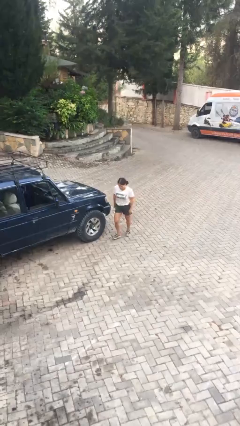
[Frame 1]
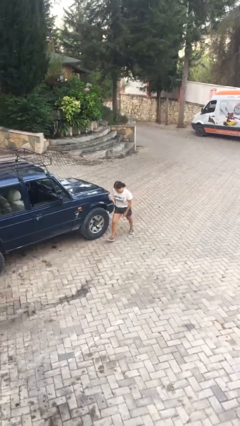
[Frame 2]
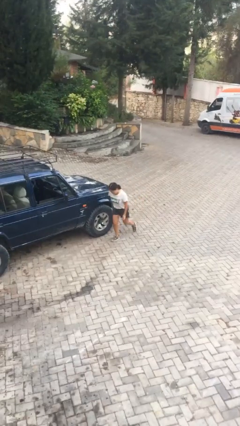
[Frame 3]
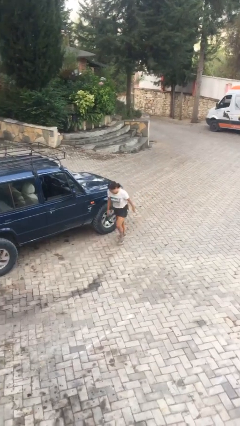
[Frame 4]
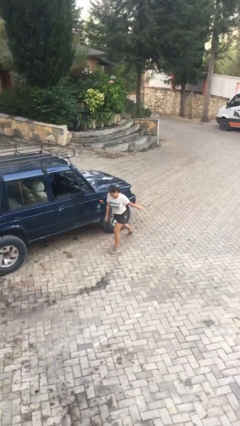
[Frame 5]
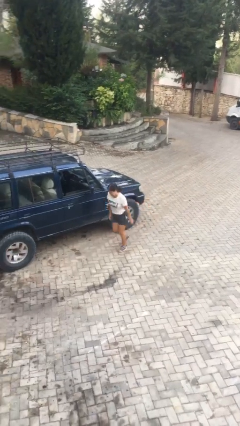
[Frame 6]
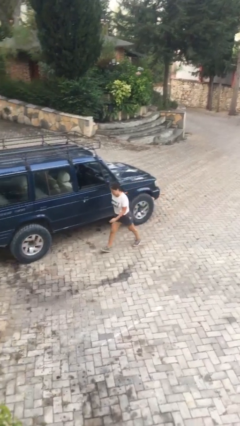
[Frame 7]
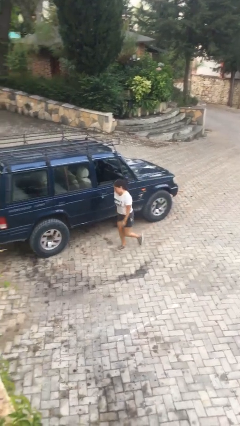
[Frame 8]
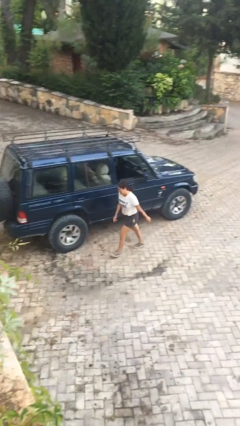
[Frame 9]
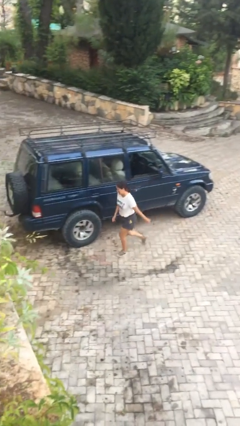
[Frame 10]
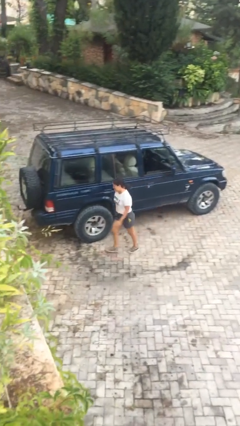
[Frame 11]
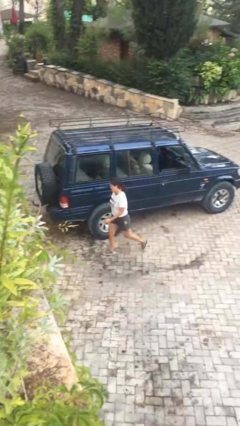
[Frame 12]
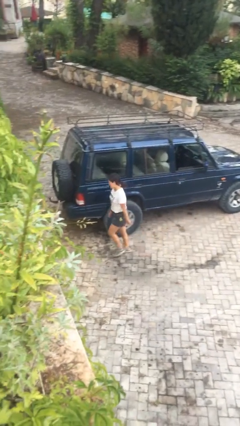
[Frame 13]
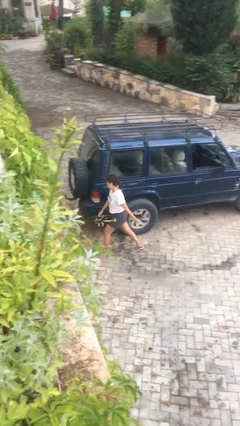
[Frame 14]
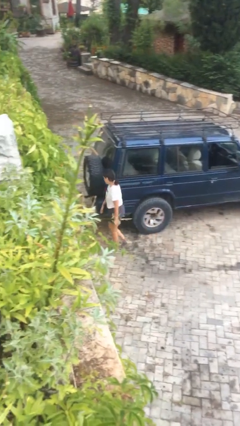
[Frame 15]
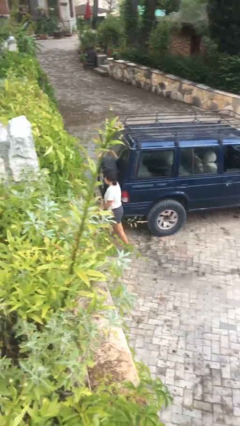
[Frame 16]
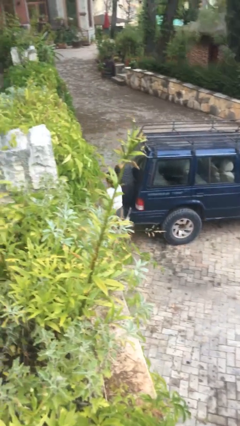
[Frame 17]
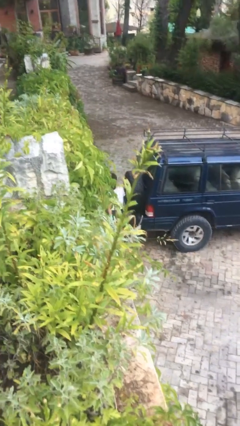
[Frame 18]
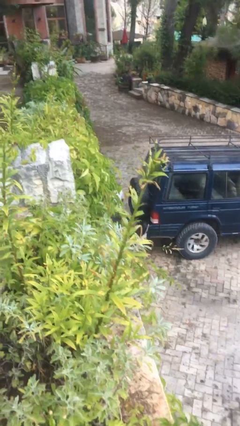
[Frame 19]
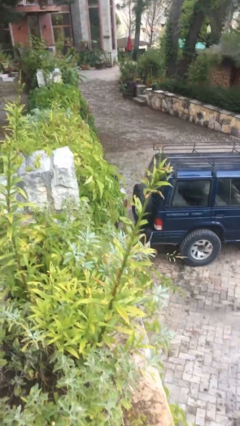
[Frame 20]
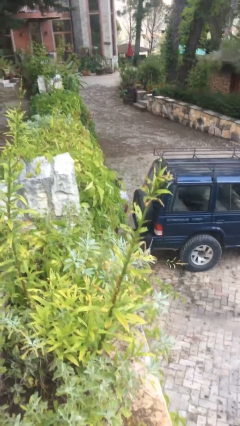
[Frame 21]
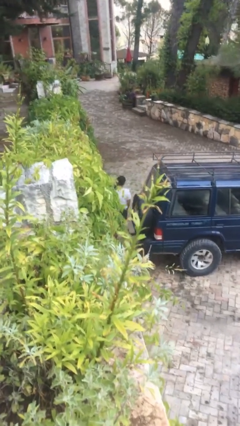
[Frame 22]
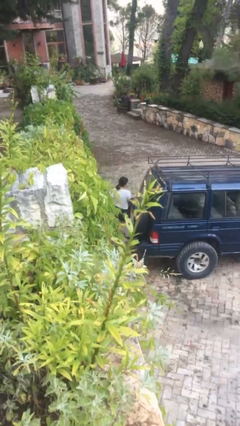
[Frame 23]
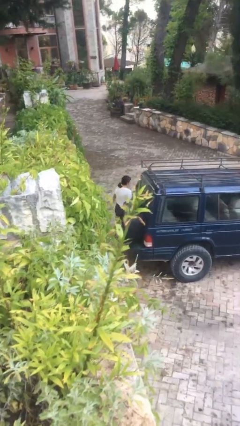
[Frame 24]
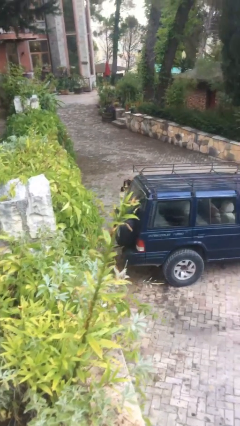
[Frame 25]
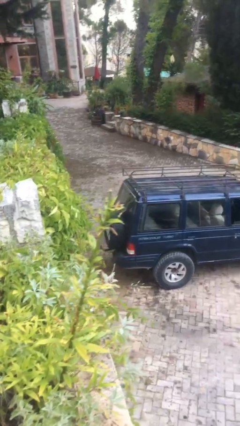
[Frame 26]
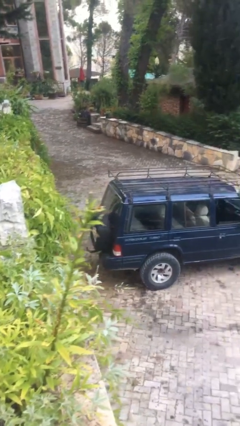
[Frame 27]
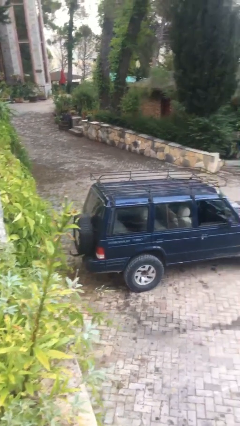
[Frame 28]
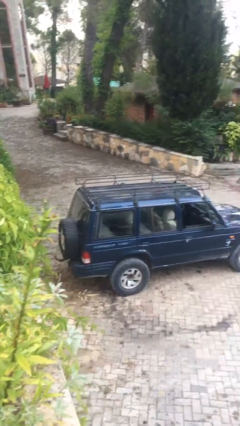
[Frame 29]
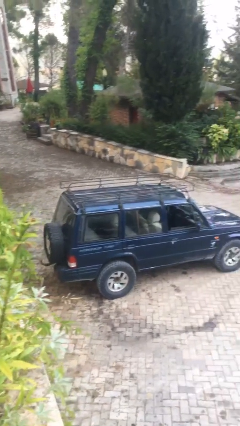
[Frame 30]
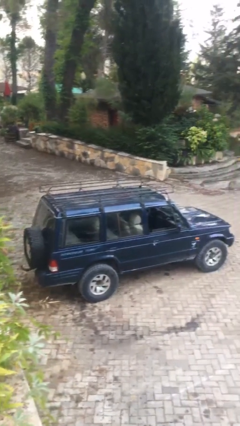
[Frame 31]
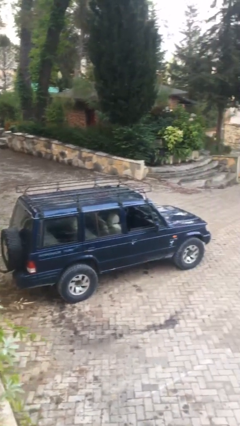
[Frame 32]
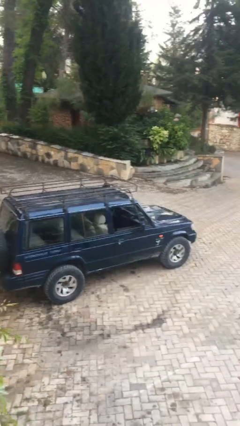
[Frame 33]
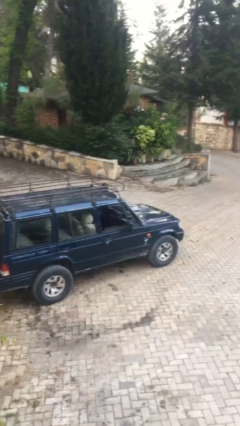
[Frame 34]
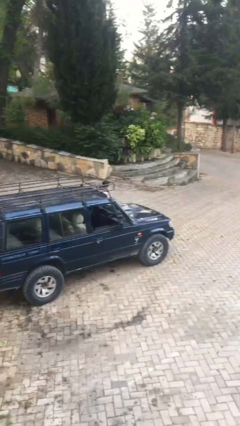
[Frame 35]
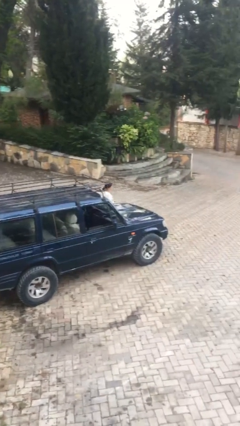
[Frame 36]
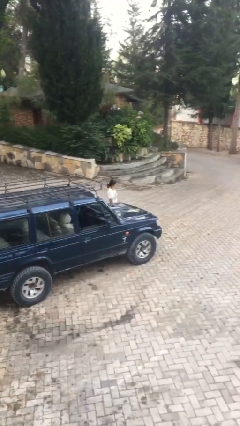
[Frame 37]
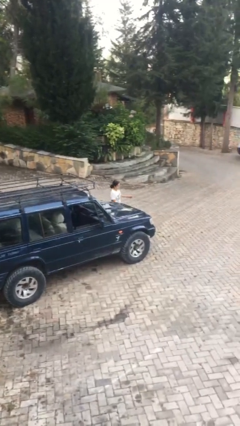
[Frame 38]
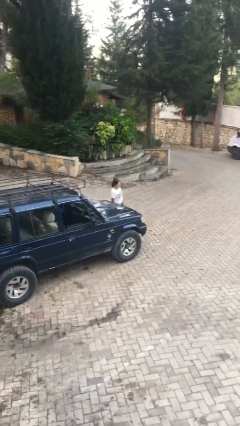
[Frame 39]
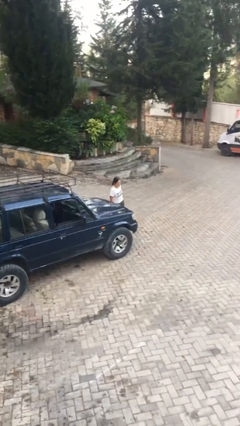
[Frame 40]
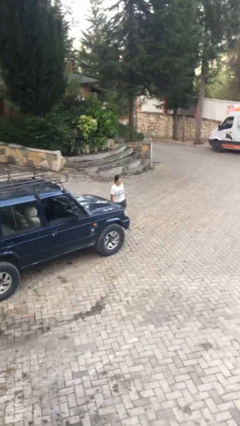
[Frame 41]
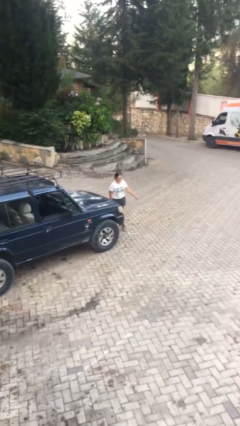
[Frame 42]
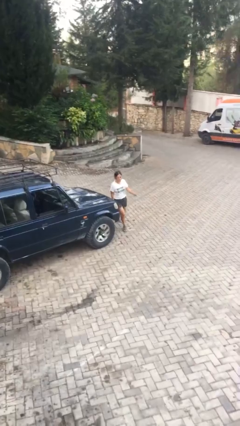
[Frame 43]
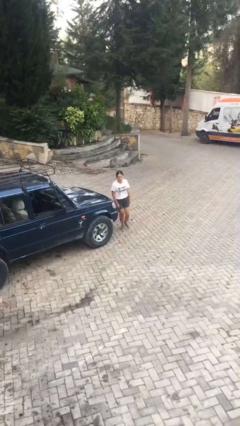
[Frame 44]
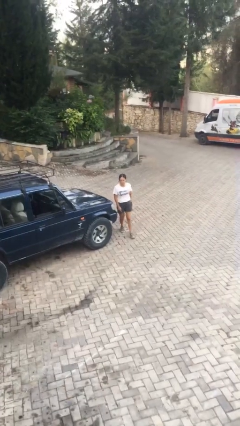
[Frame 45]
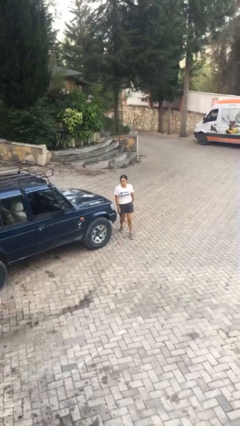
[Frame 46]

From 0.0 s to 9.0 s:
person walks around car

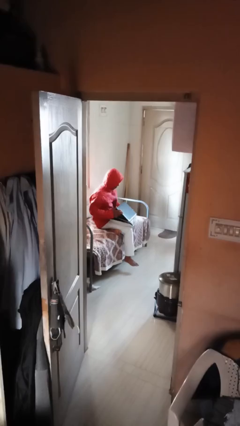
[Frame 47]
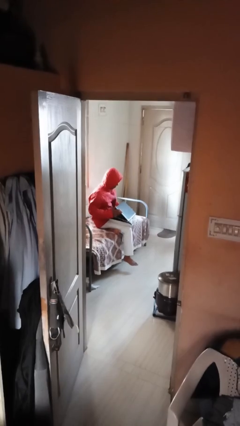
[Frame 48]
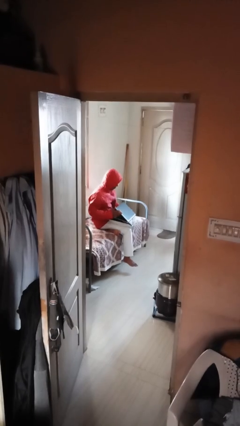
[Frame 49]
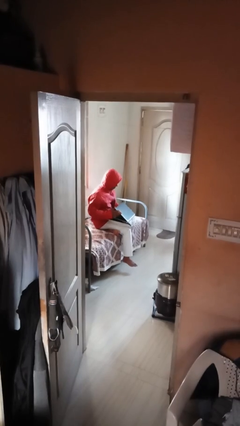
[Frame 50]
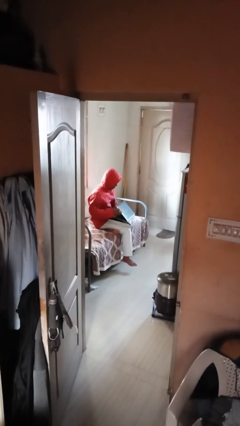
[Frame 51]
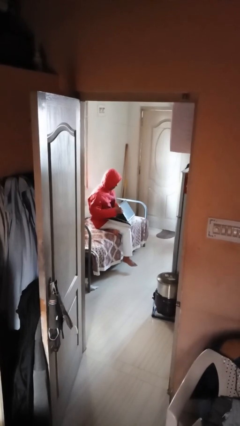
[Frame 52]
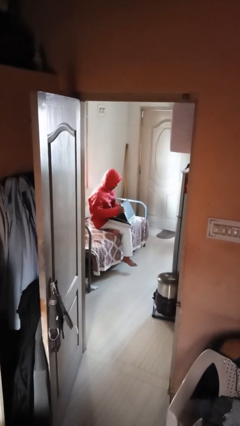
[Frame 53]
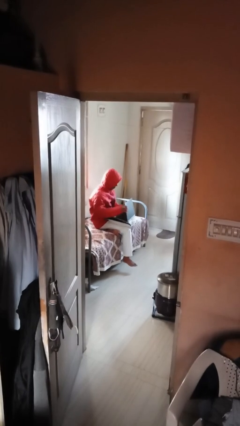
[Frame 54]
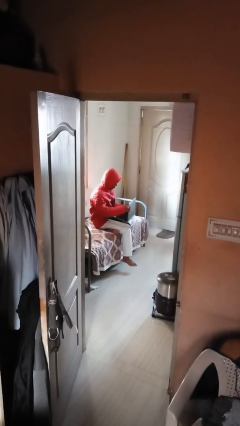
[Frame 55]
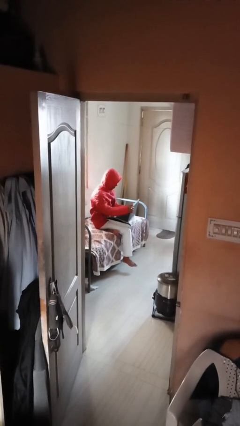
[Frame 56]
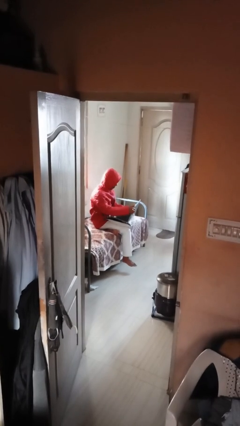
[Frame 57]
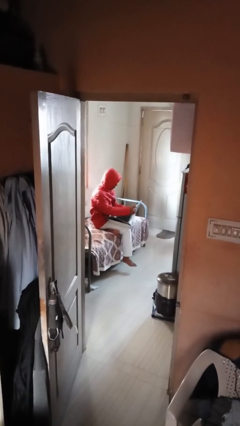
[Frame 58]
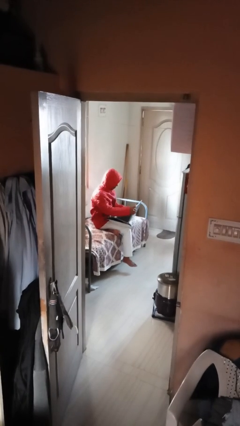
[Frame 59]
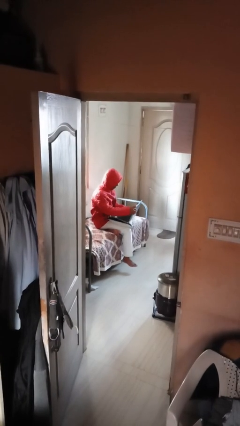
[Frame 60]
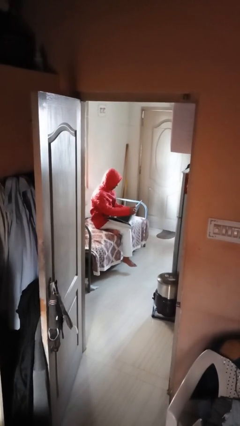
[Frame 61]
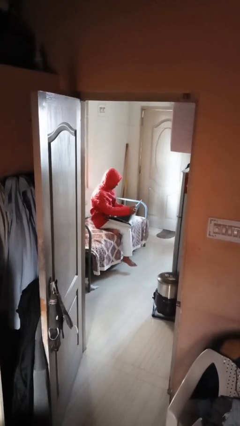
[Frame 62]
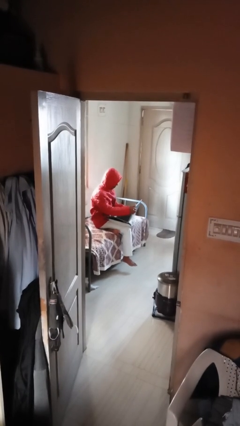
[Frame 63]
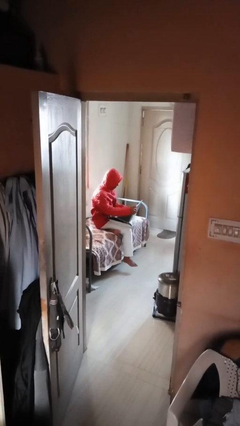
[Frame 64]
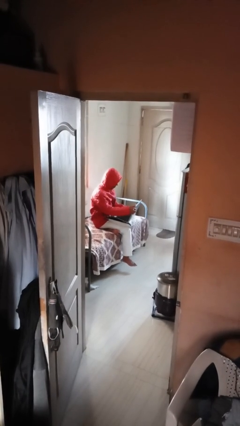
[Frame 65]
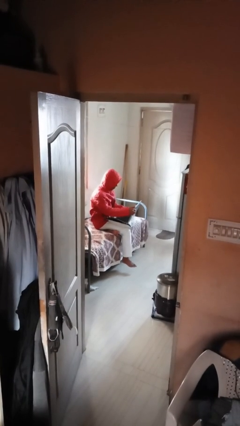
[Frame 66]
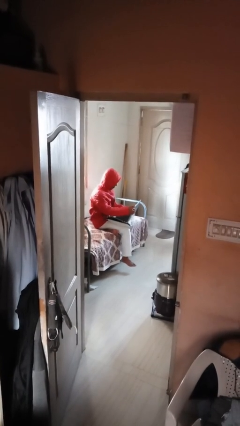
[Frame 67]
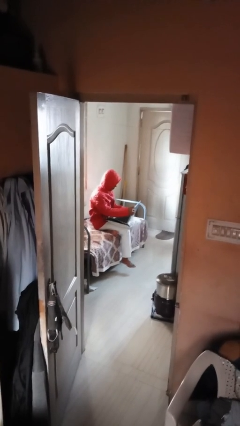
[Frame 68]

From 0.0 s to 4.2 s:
person interacts with laptop

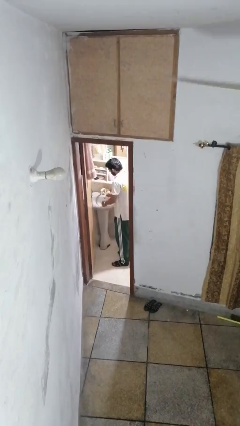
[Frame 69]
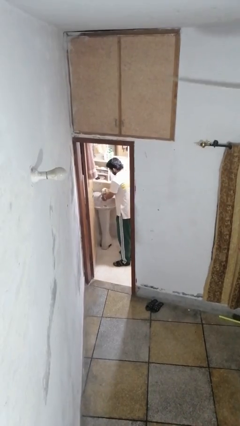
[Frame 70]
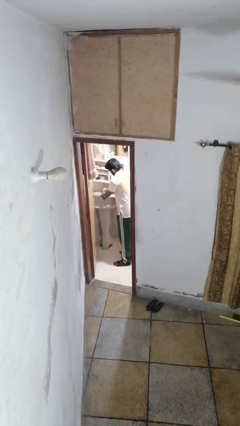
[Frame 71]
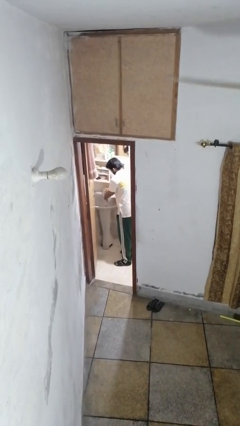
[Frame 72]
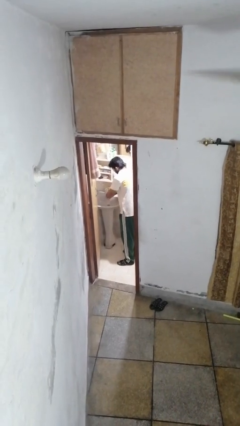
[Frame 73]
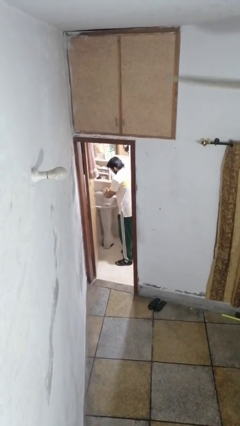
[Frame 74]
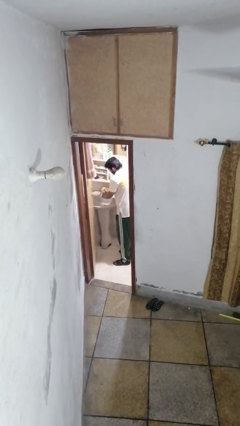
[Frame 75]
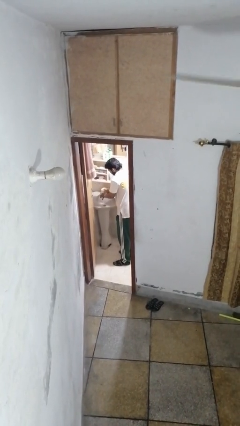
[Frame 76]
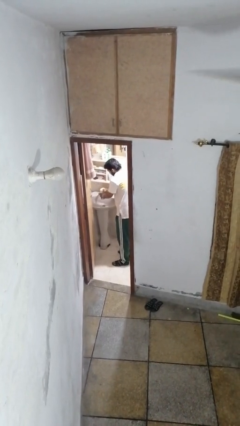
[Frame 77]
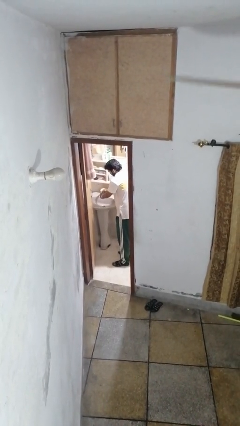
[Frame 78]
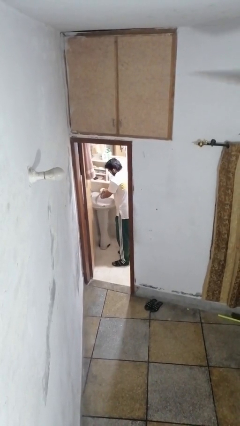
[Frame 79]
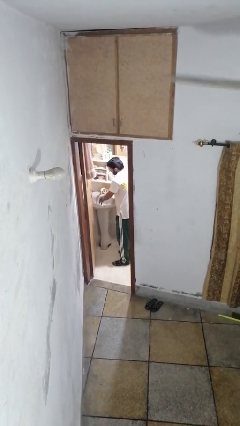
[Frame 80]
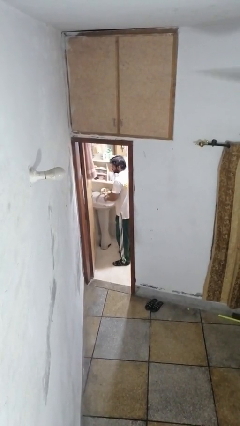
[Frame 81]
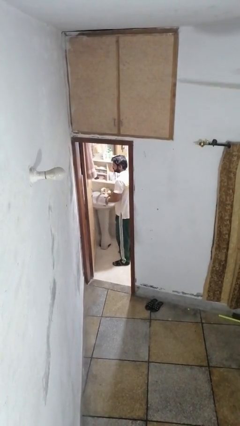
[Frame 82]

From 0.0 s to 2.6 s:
person washes hands

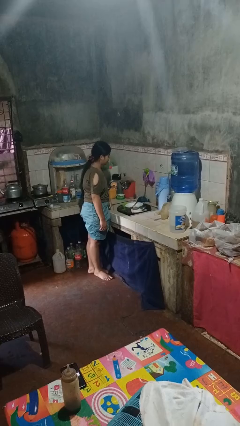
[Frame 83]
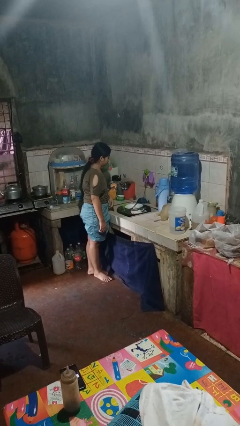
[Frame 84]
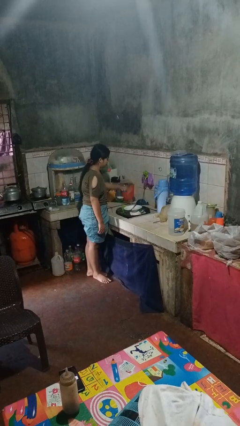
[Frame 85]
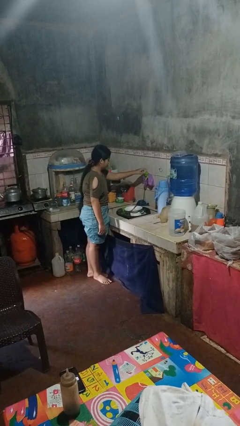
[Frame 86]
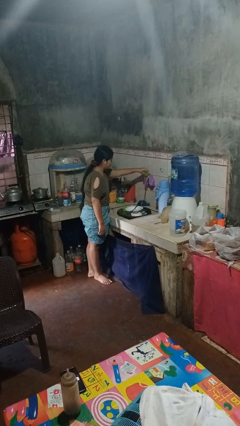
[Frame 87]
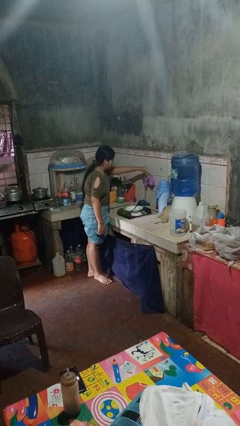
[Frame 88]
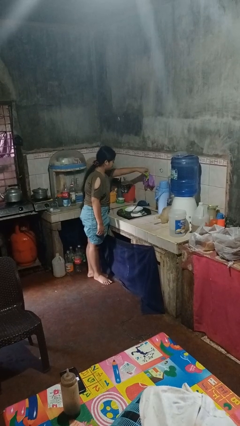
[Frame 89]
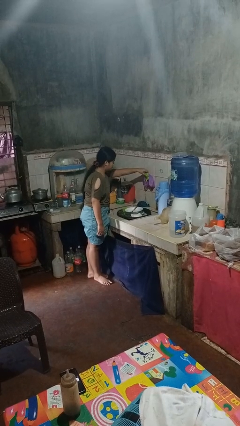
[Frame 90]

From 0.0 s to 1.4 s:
person turns off faucet

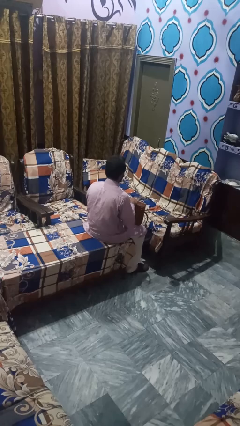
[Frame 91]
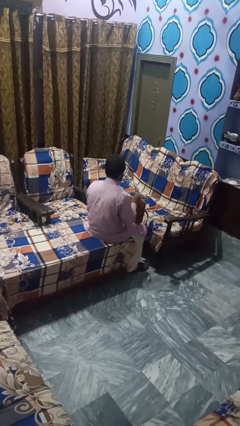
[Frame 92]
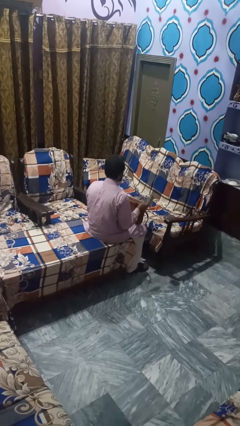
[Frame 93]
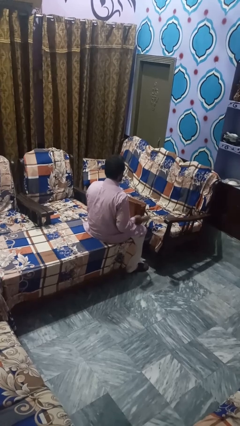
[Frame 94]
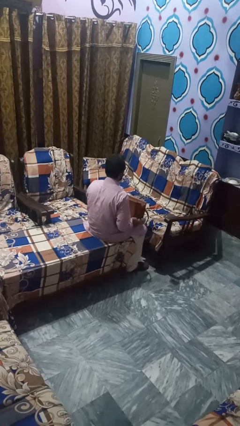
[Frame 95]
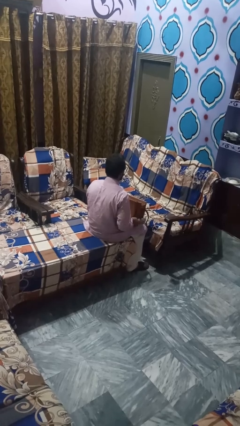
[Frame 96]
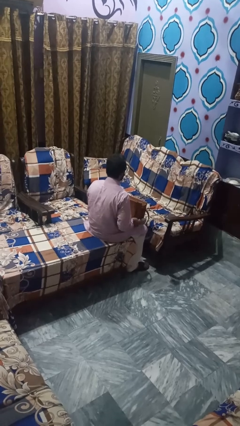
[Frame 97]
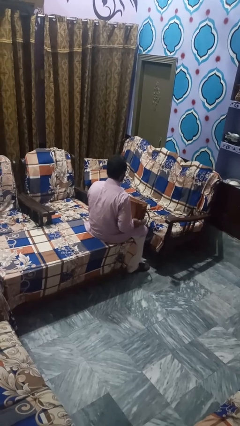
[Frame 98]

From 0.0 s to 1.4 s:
person puts object into bag
